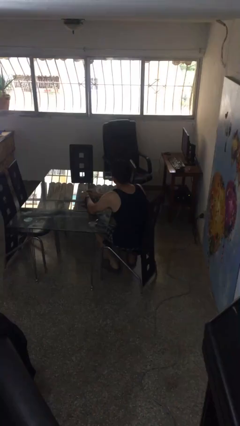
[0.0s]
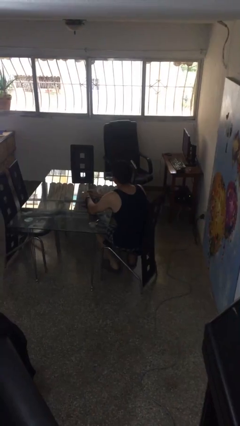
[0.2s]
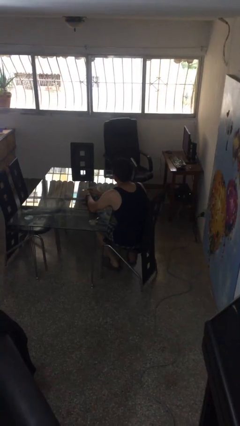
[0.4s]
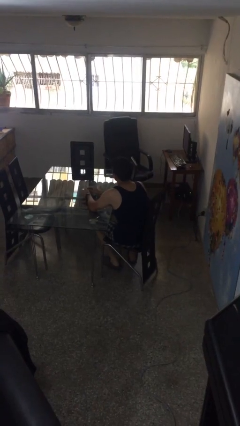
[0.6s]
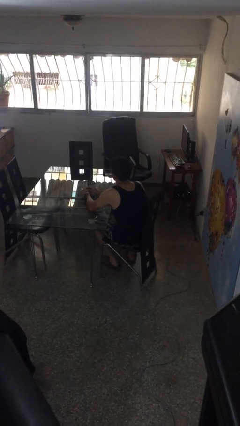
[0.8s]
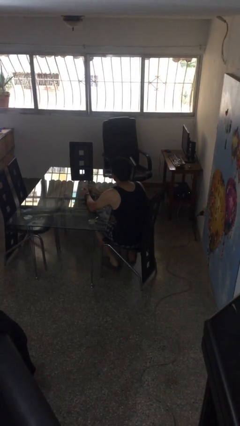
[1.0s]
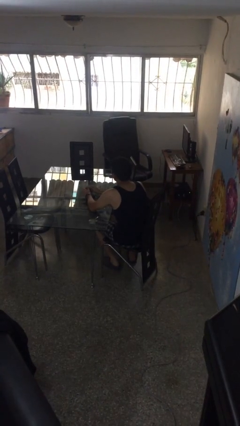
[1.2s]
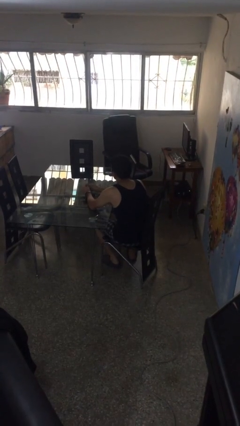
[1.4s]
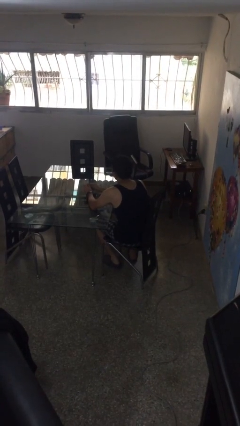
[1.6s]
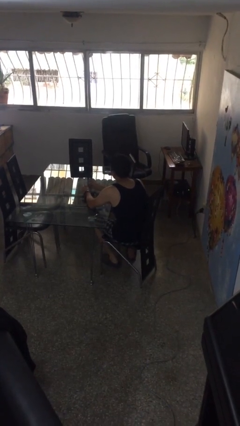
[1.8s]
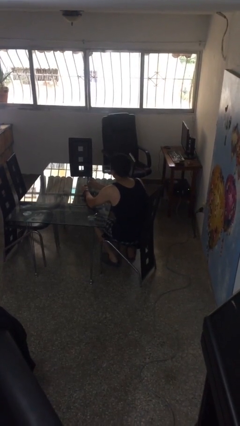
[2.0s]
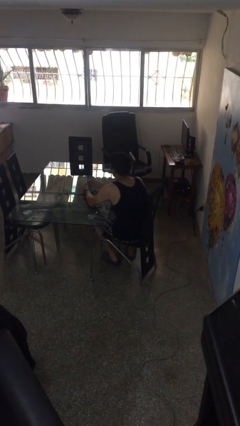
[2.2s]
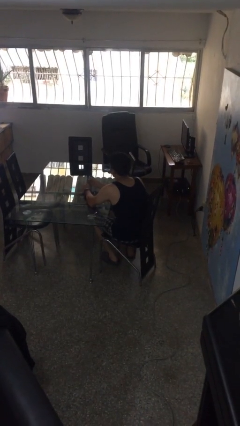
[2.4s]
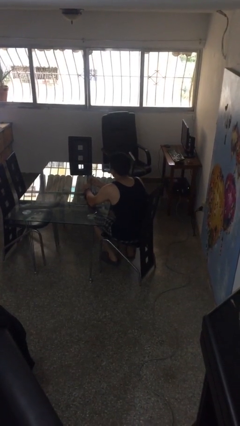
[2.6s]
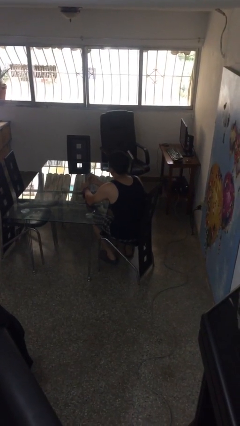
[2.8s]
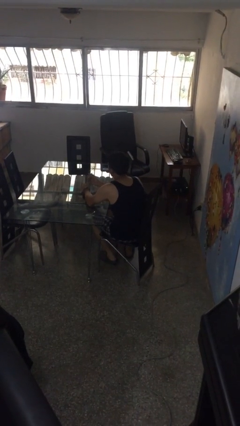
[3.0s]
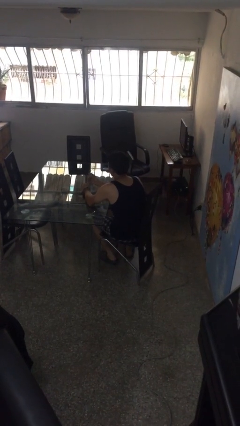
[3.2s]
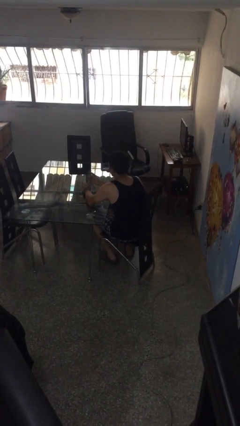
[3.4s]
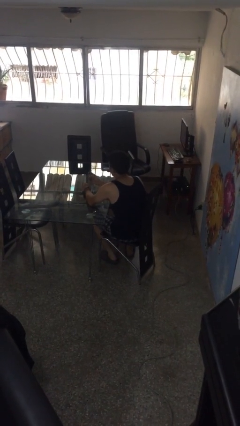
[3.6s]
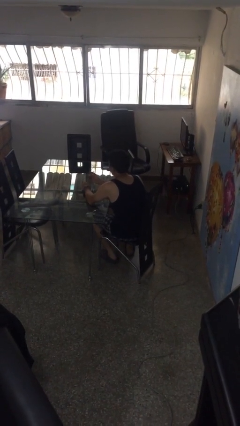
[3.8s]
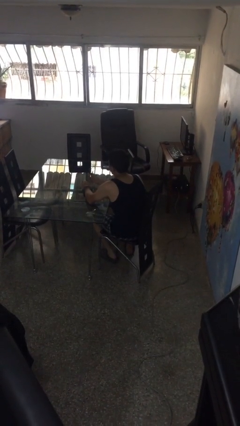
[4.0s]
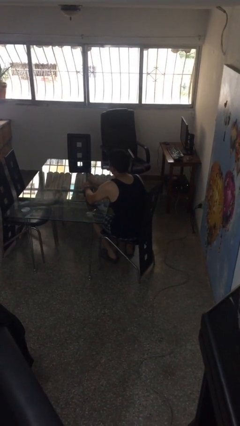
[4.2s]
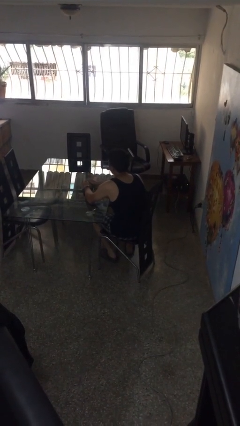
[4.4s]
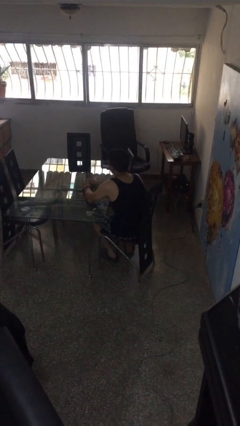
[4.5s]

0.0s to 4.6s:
person clips fingernails

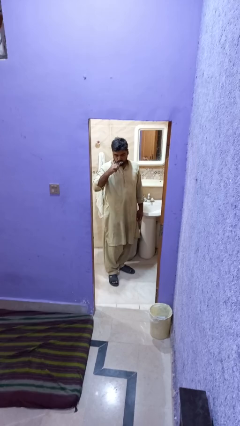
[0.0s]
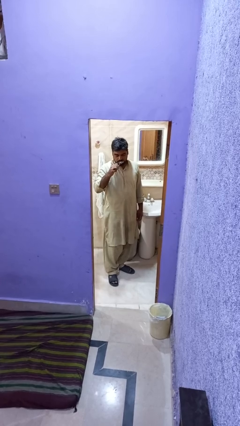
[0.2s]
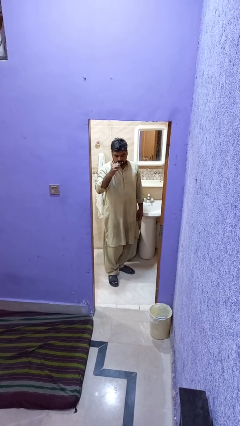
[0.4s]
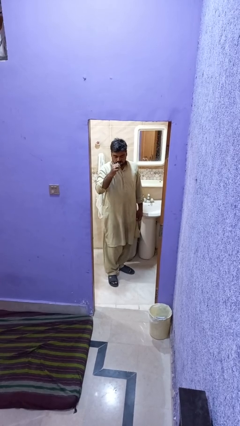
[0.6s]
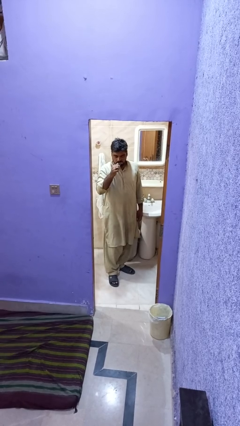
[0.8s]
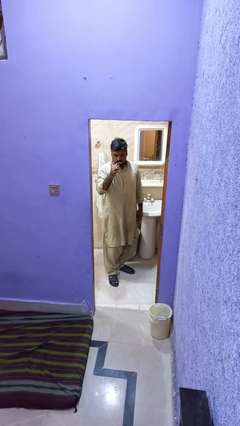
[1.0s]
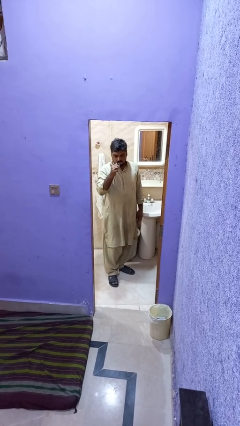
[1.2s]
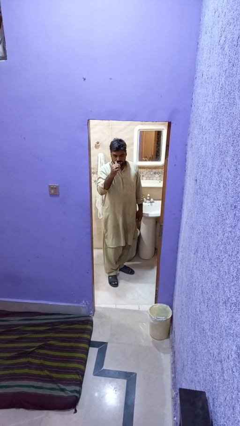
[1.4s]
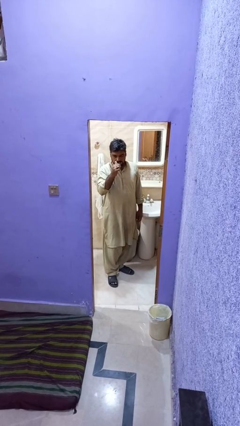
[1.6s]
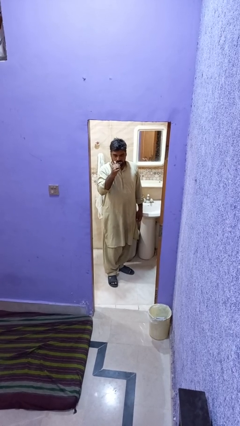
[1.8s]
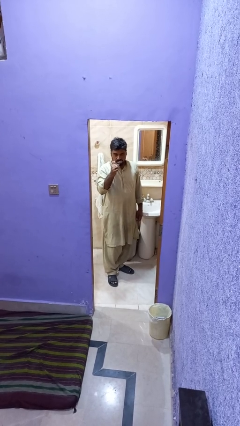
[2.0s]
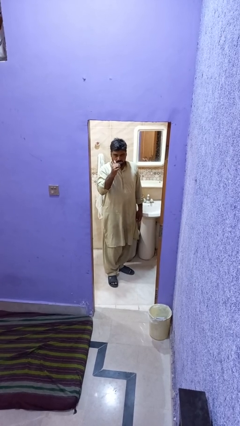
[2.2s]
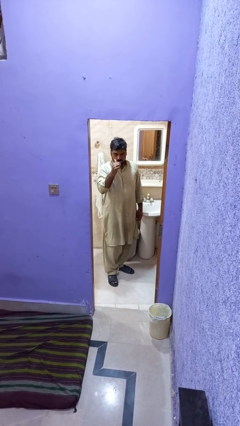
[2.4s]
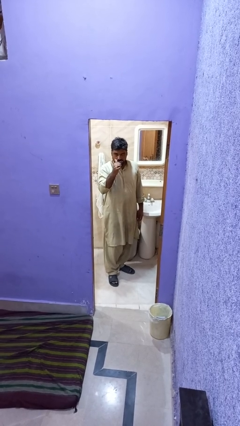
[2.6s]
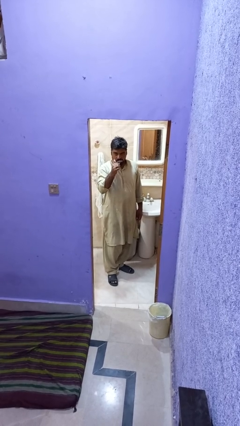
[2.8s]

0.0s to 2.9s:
person brushes teeth

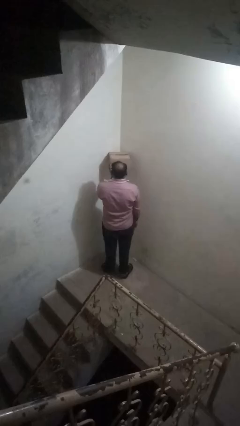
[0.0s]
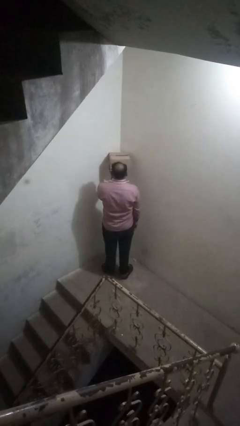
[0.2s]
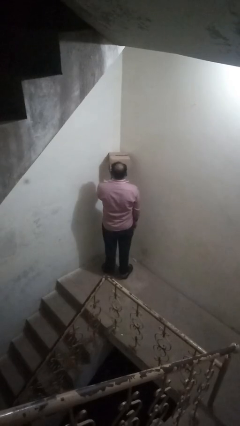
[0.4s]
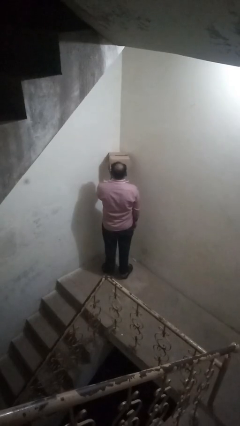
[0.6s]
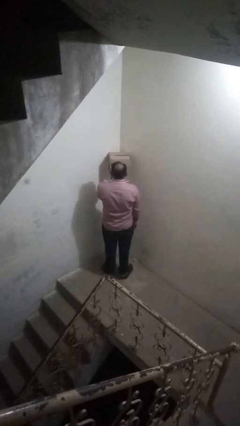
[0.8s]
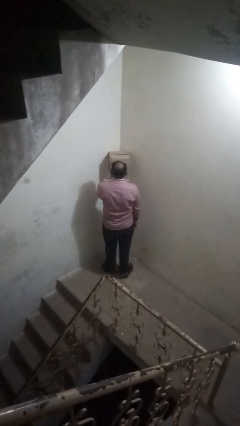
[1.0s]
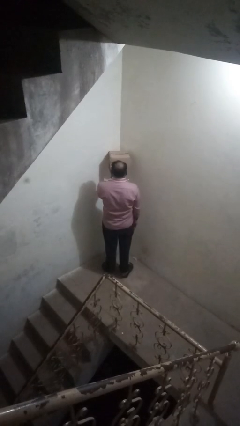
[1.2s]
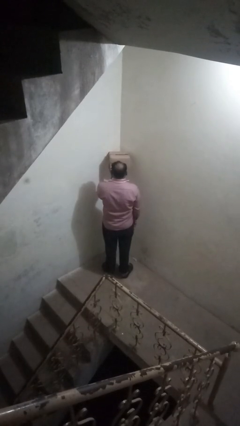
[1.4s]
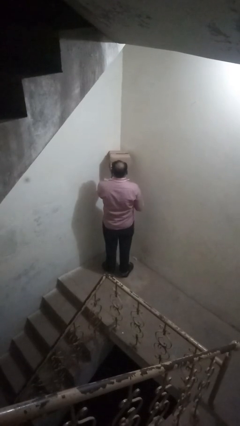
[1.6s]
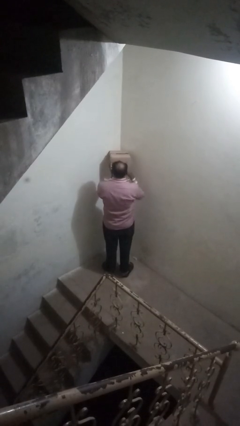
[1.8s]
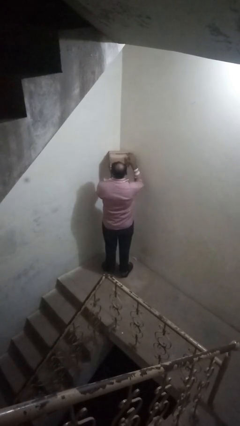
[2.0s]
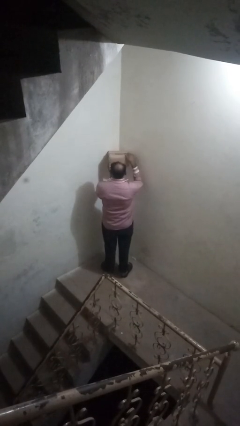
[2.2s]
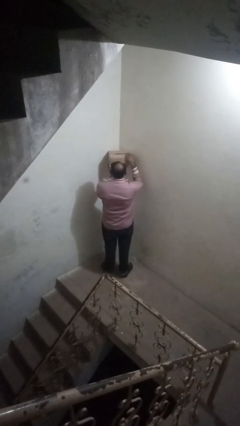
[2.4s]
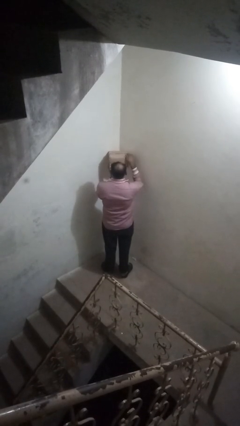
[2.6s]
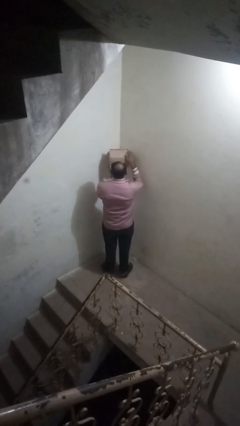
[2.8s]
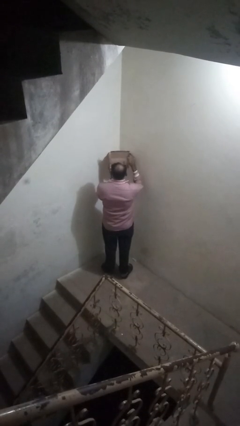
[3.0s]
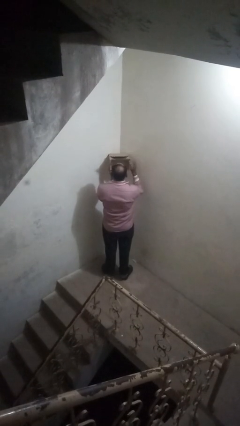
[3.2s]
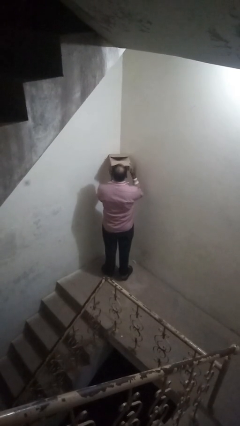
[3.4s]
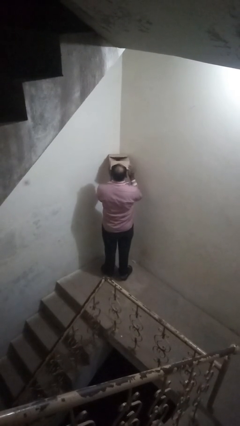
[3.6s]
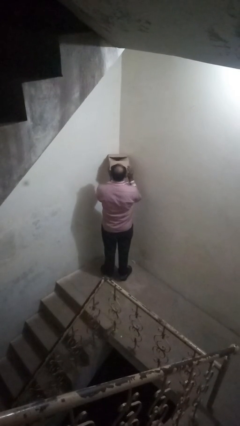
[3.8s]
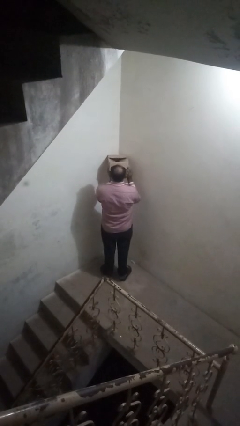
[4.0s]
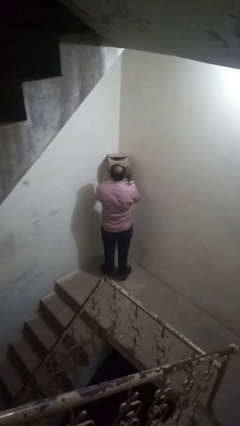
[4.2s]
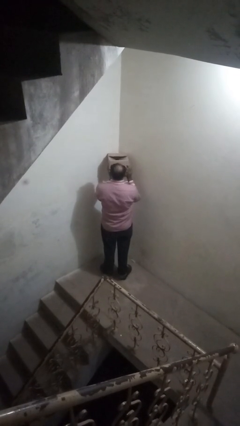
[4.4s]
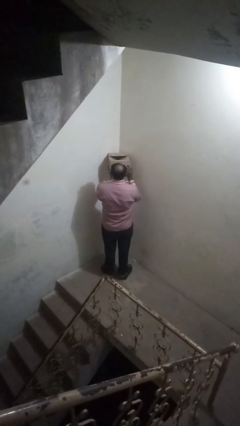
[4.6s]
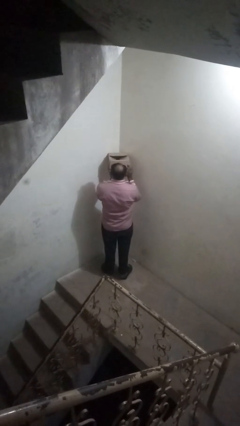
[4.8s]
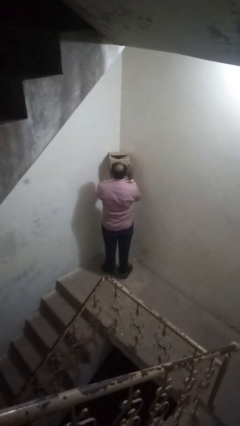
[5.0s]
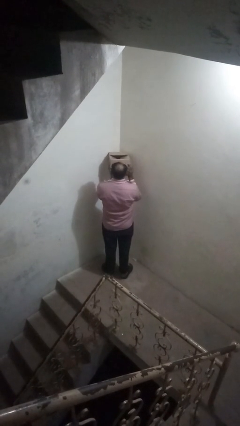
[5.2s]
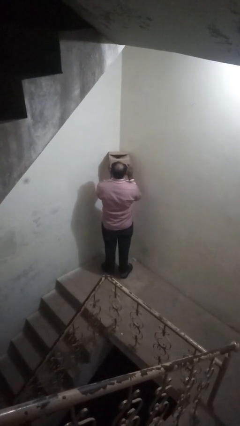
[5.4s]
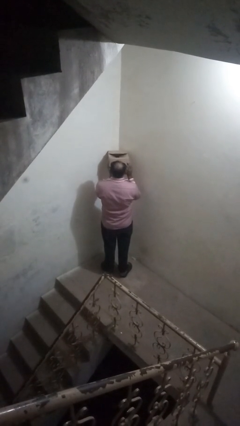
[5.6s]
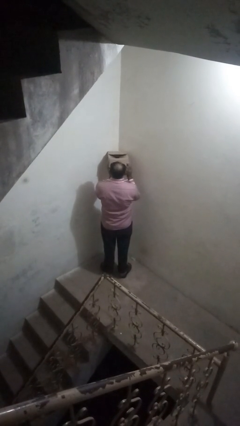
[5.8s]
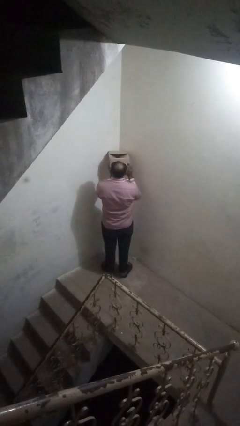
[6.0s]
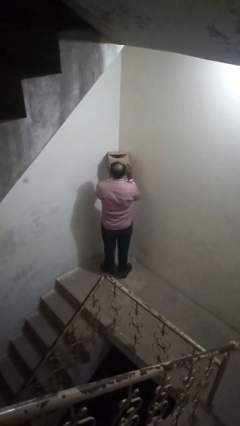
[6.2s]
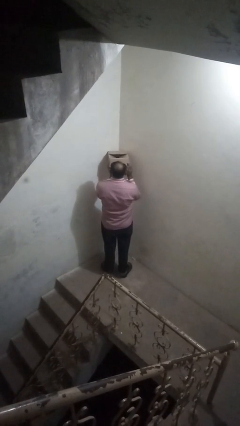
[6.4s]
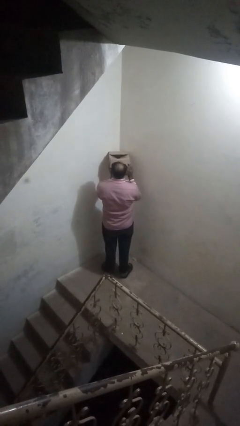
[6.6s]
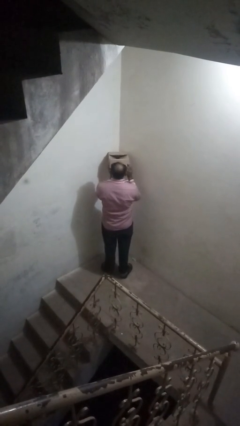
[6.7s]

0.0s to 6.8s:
person opens mailbox

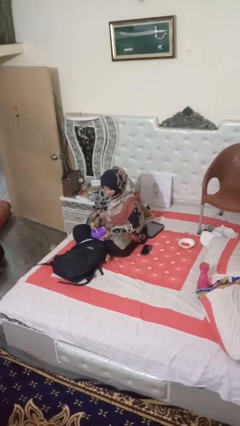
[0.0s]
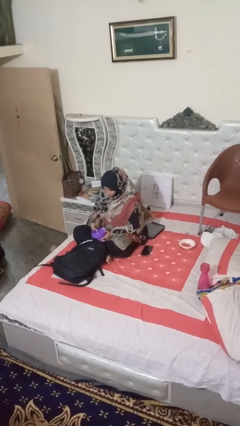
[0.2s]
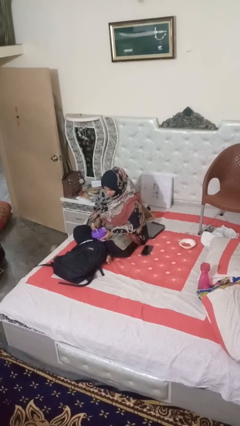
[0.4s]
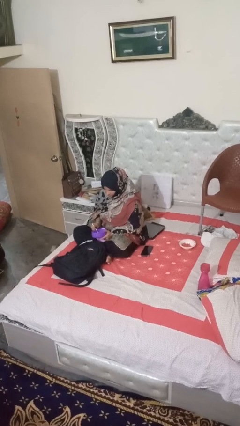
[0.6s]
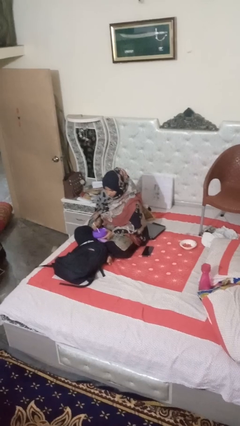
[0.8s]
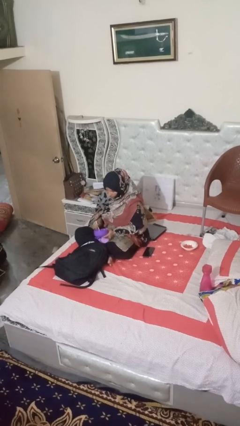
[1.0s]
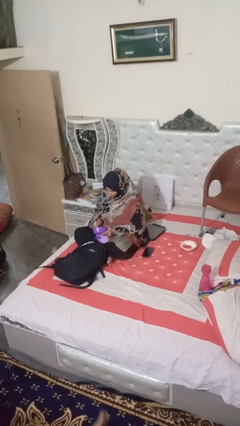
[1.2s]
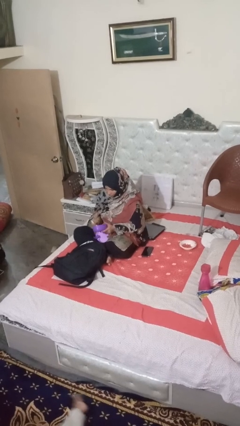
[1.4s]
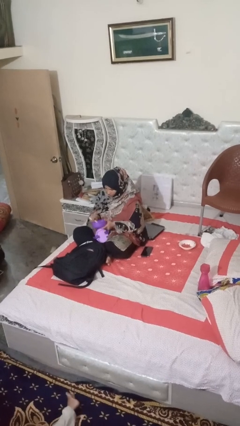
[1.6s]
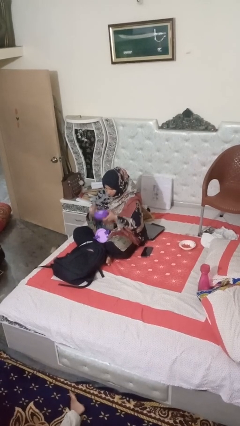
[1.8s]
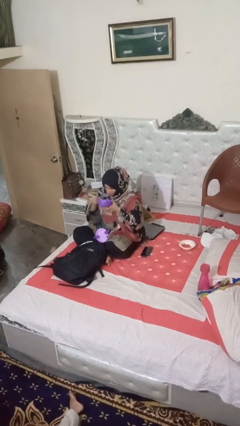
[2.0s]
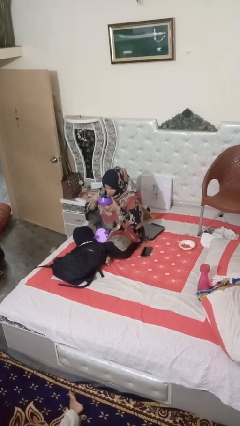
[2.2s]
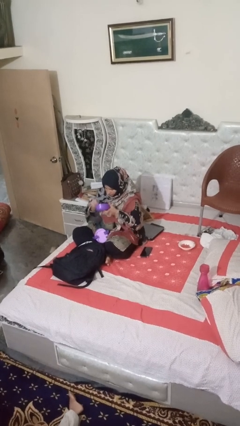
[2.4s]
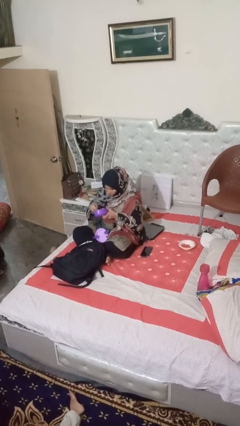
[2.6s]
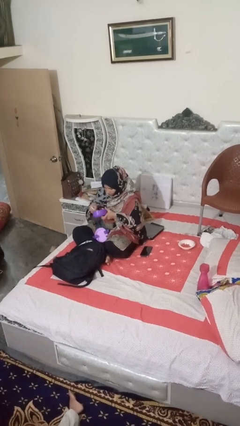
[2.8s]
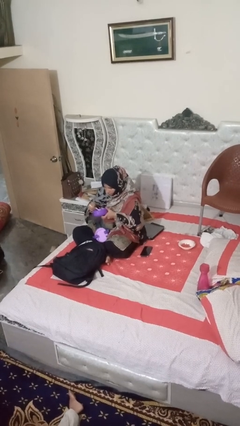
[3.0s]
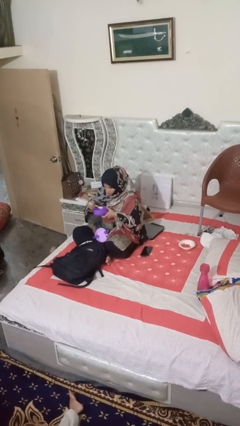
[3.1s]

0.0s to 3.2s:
person eats snack from bag

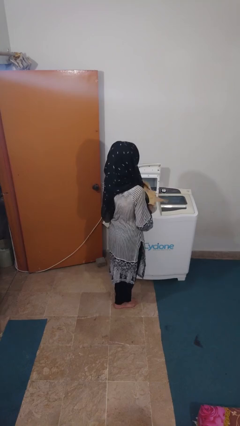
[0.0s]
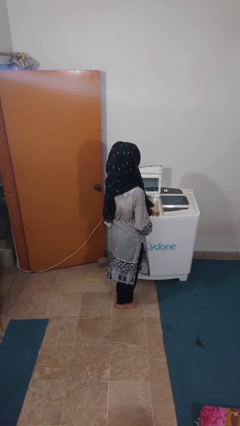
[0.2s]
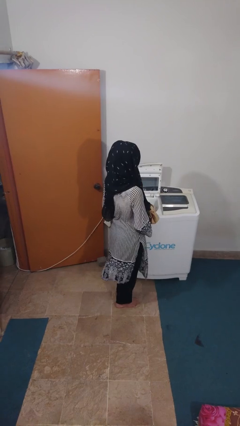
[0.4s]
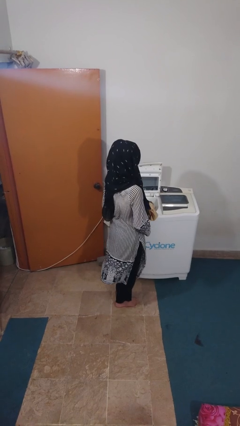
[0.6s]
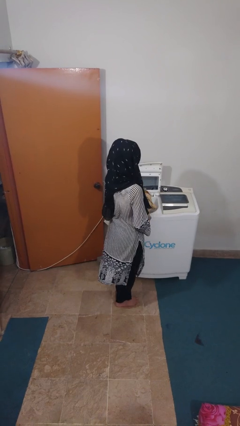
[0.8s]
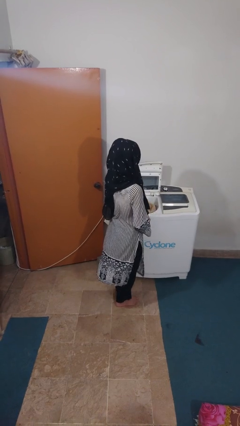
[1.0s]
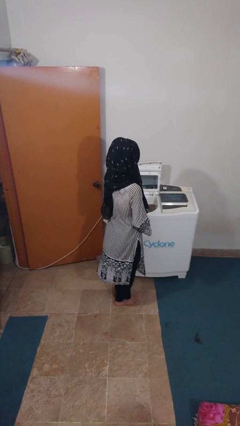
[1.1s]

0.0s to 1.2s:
person loads clotheswasher
